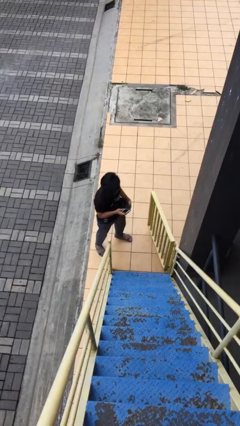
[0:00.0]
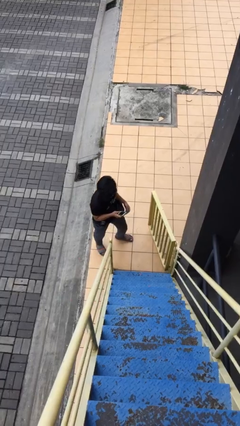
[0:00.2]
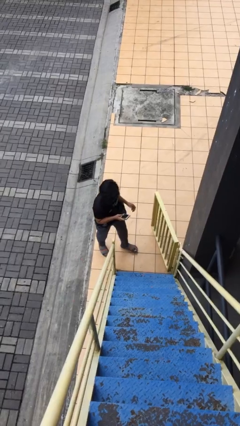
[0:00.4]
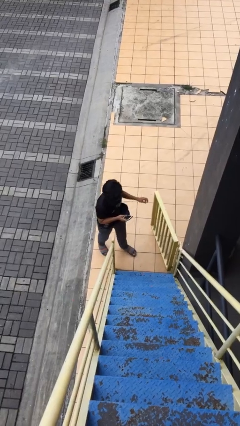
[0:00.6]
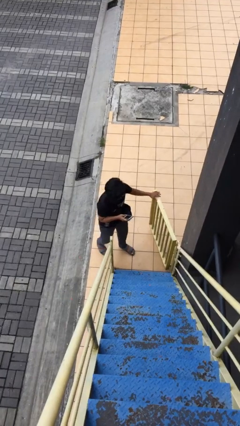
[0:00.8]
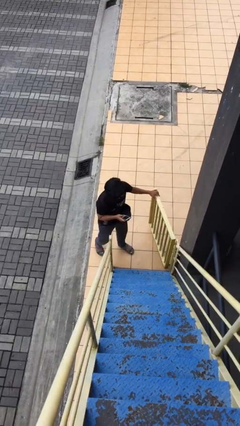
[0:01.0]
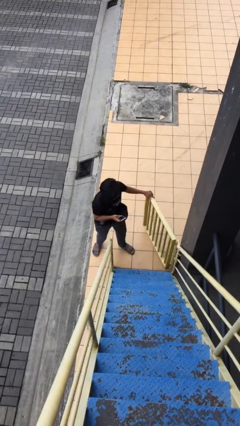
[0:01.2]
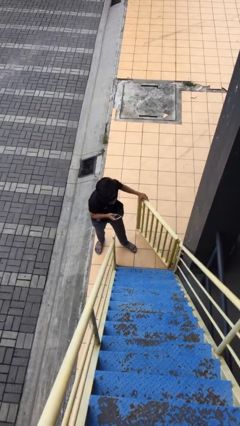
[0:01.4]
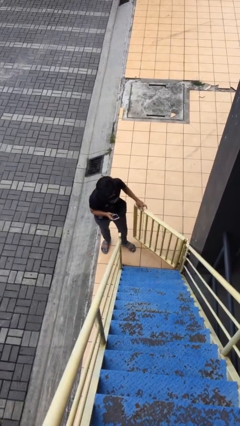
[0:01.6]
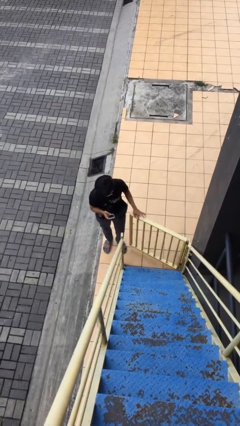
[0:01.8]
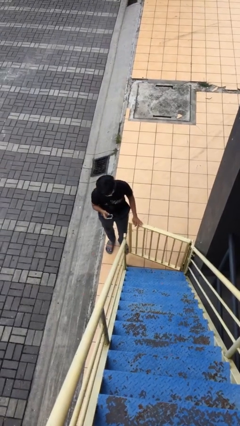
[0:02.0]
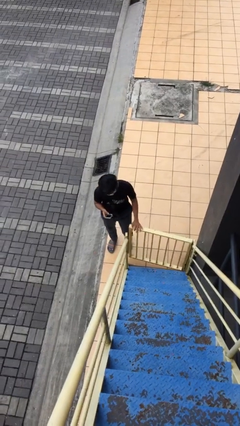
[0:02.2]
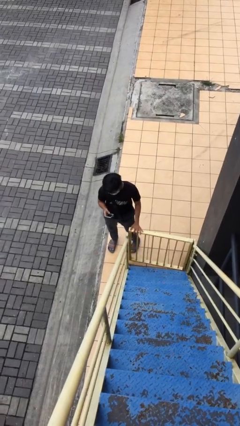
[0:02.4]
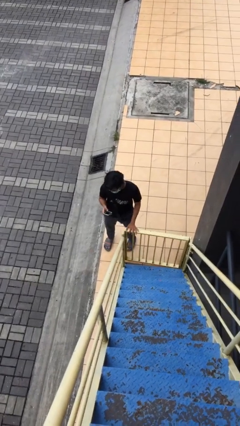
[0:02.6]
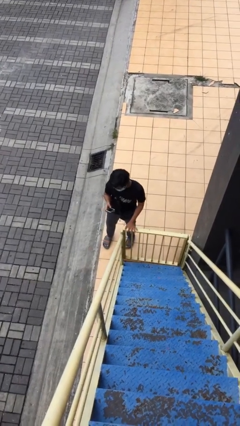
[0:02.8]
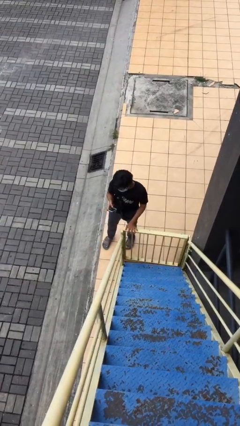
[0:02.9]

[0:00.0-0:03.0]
person closes facility door

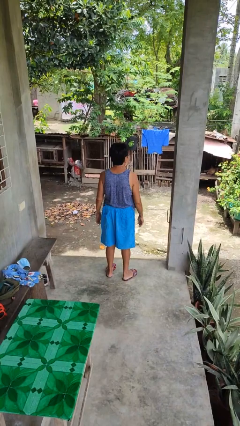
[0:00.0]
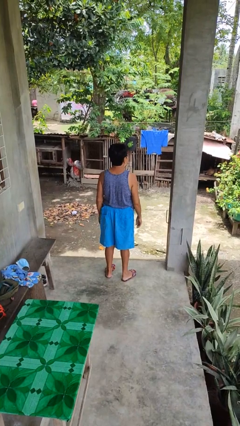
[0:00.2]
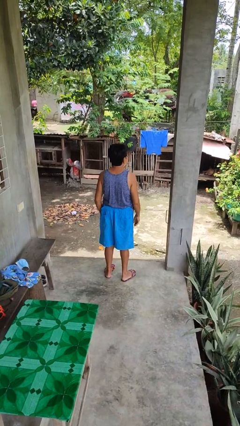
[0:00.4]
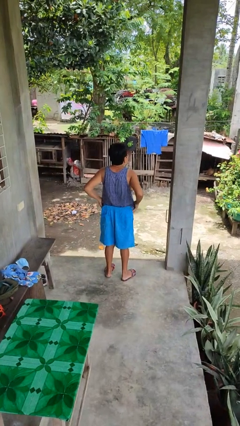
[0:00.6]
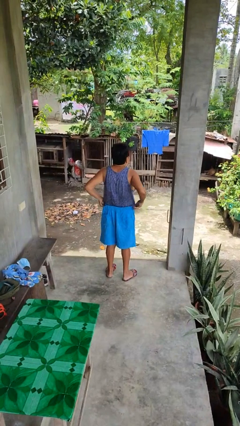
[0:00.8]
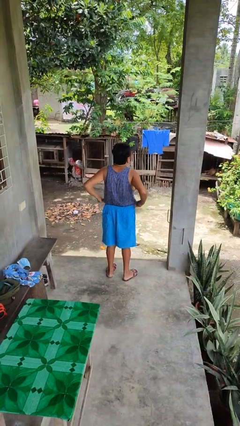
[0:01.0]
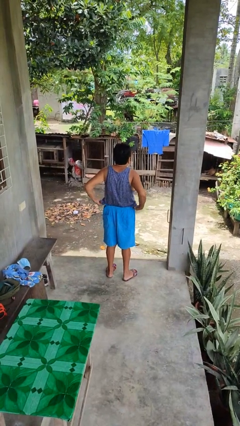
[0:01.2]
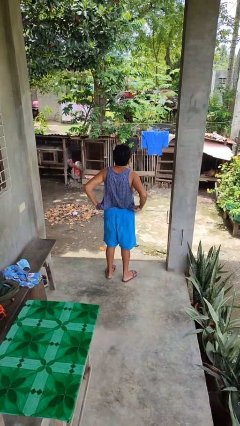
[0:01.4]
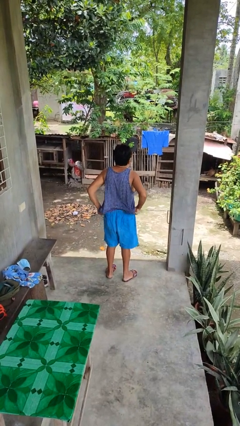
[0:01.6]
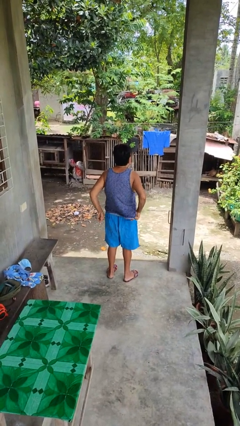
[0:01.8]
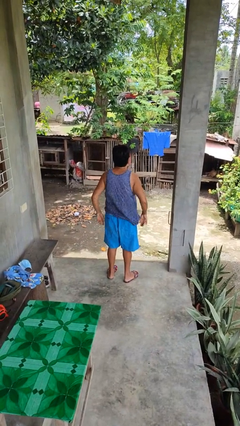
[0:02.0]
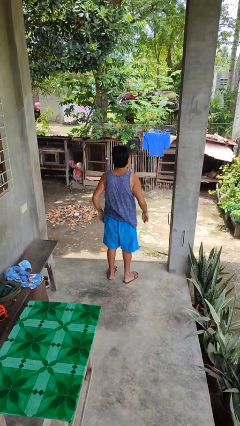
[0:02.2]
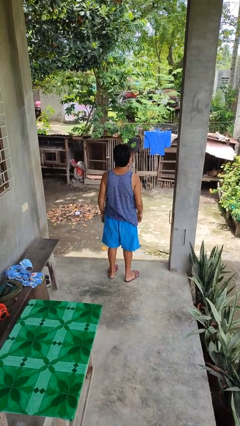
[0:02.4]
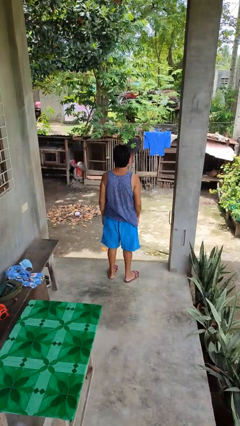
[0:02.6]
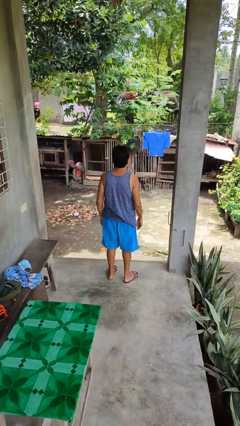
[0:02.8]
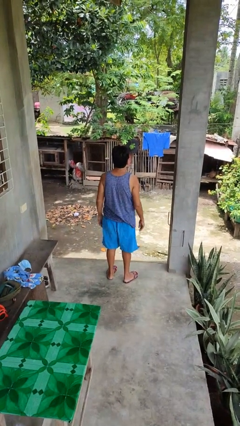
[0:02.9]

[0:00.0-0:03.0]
person untucks shirt

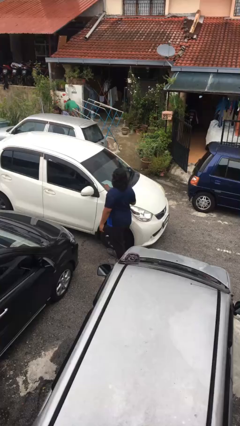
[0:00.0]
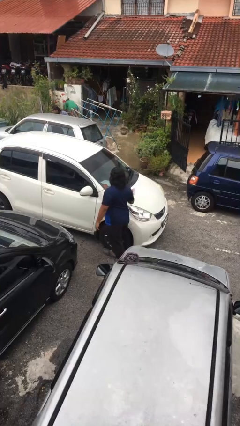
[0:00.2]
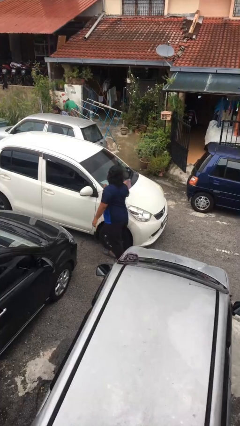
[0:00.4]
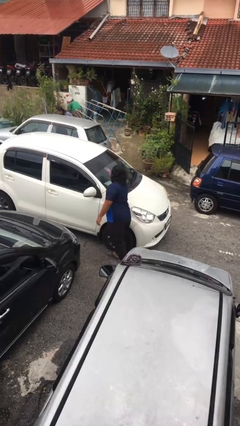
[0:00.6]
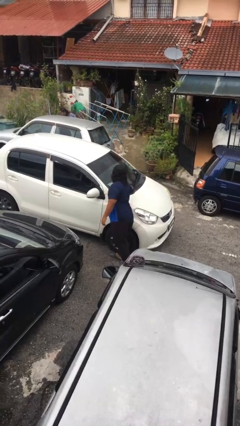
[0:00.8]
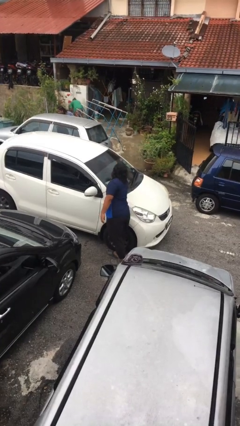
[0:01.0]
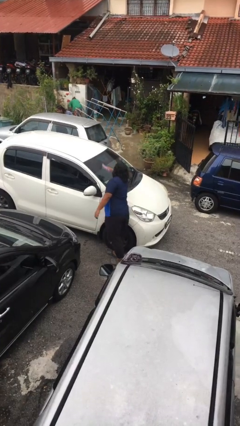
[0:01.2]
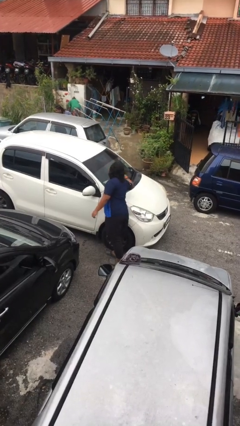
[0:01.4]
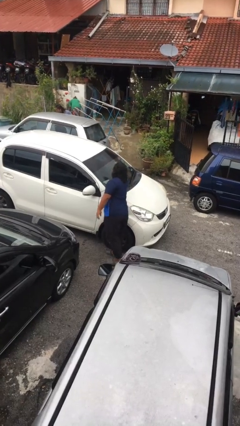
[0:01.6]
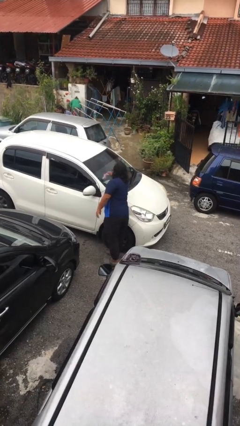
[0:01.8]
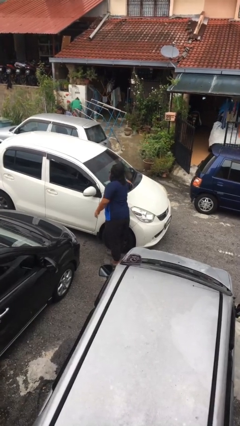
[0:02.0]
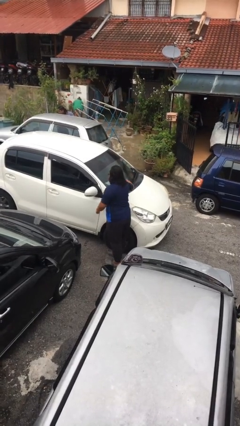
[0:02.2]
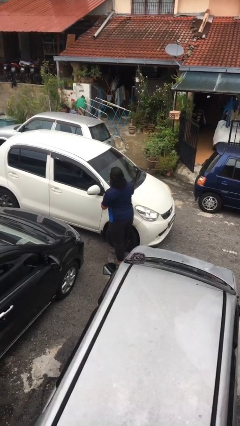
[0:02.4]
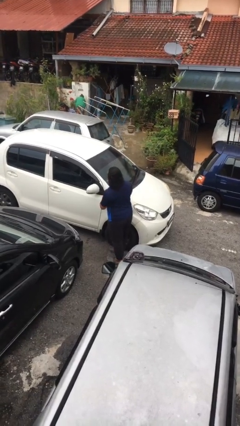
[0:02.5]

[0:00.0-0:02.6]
person polishes car with rag

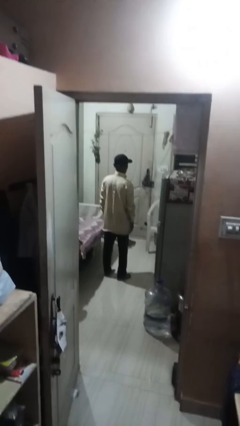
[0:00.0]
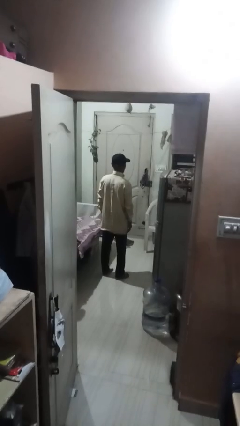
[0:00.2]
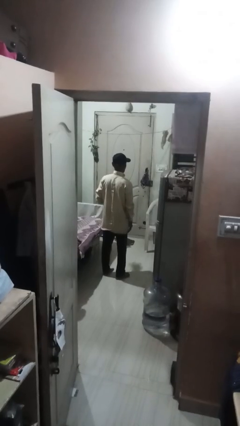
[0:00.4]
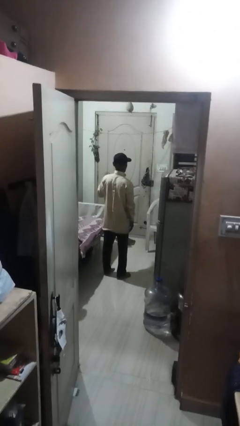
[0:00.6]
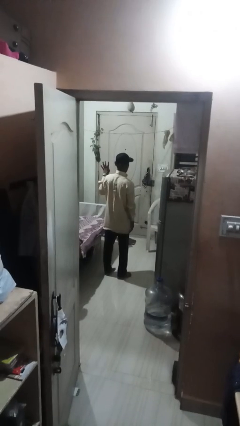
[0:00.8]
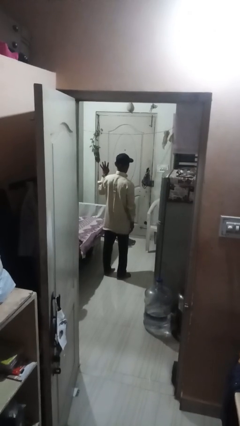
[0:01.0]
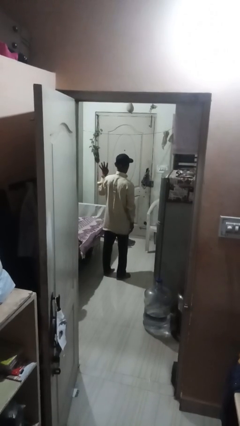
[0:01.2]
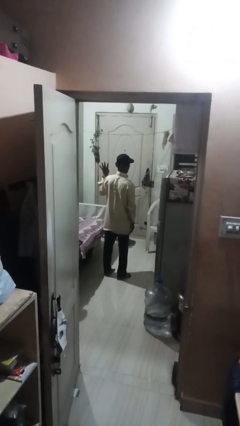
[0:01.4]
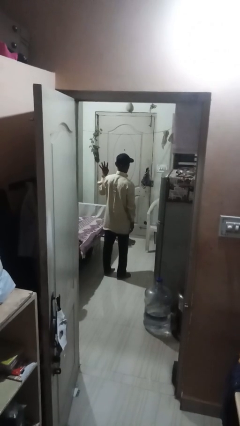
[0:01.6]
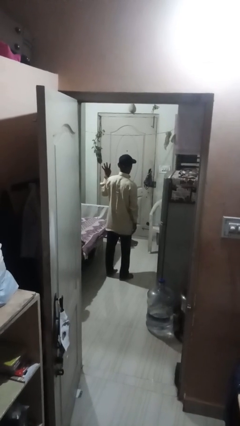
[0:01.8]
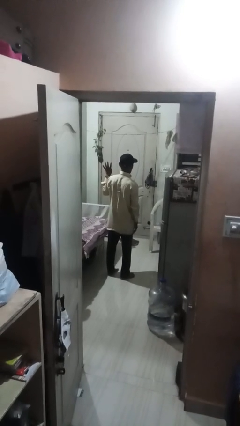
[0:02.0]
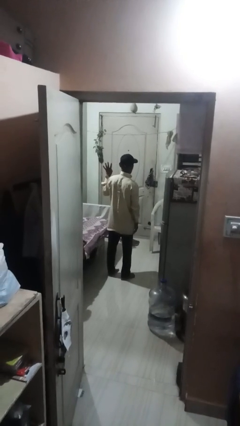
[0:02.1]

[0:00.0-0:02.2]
person gestures number four

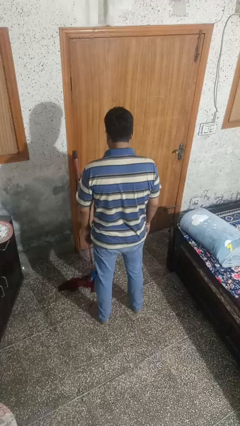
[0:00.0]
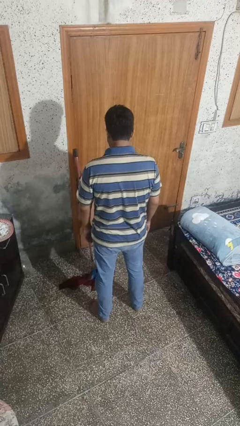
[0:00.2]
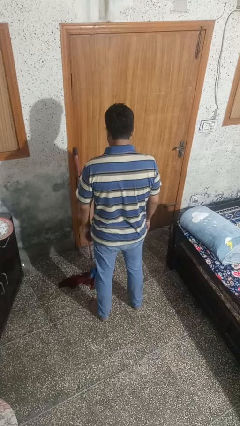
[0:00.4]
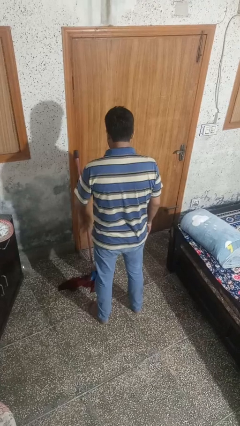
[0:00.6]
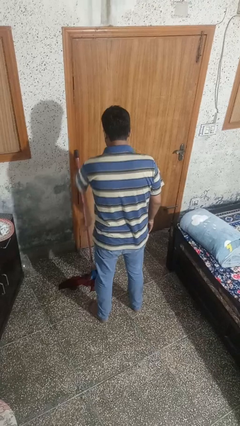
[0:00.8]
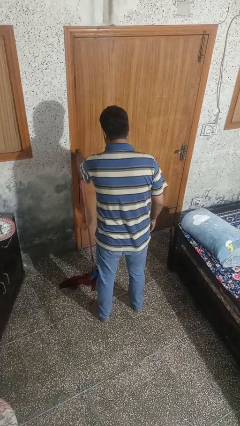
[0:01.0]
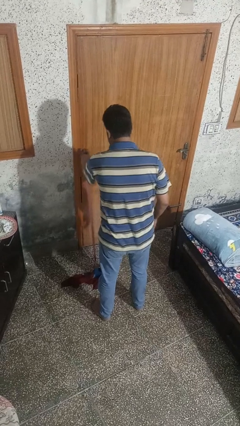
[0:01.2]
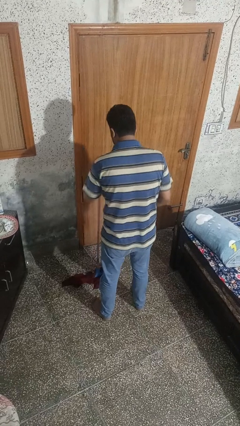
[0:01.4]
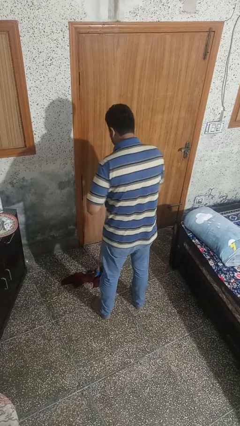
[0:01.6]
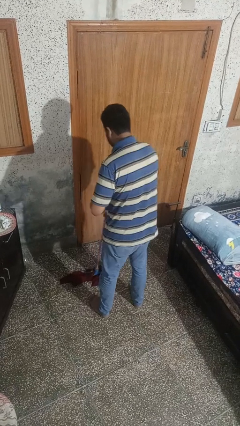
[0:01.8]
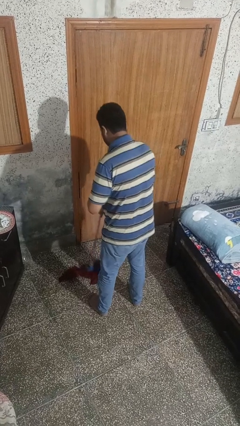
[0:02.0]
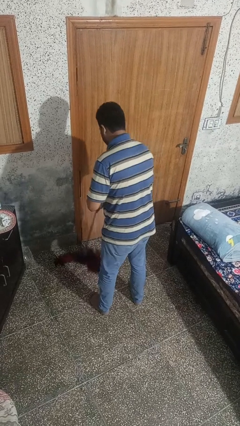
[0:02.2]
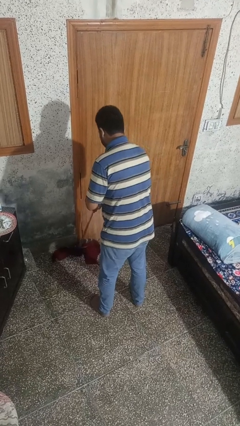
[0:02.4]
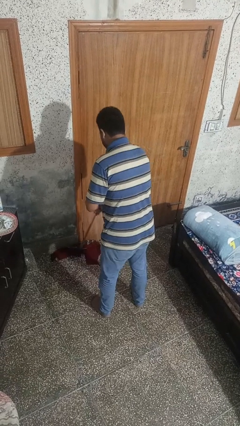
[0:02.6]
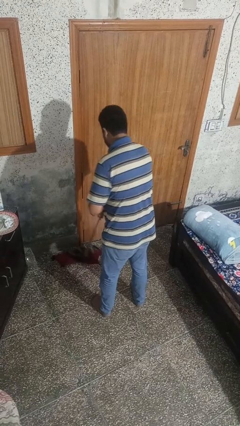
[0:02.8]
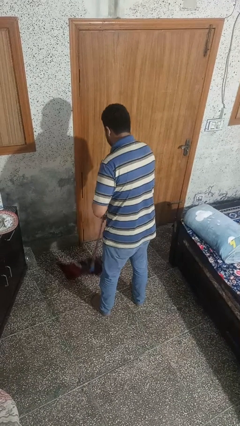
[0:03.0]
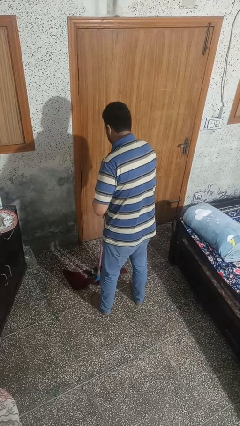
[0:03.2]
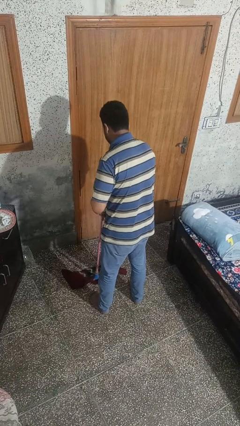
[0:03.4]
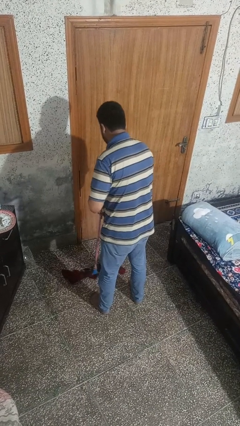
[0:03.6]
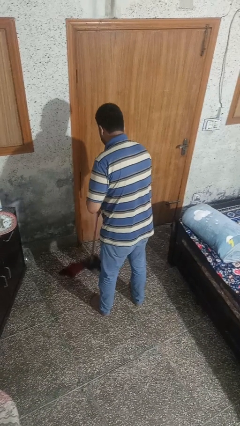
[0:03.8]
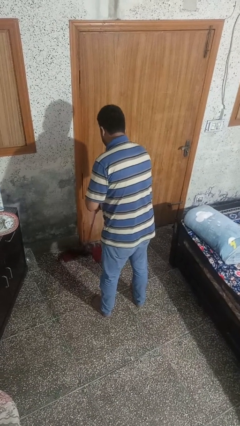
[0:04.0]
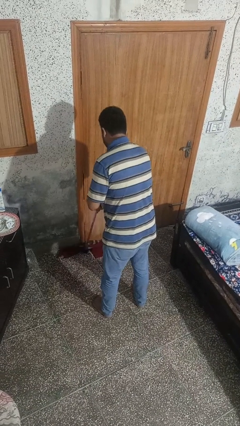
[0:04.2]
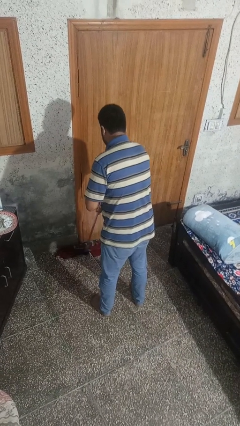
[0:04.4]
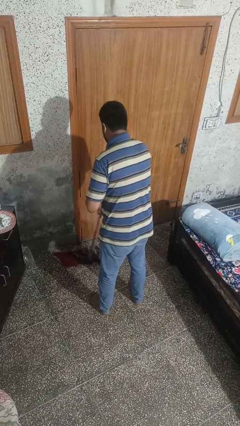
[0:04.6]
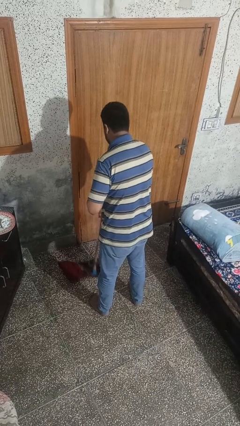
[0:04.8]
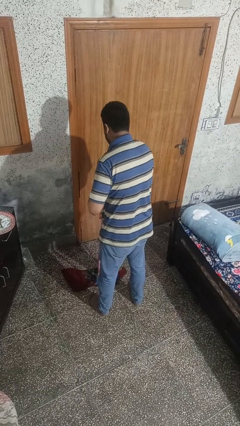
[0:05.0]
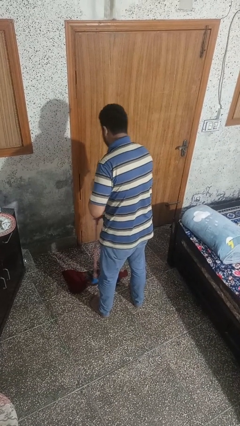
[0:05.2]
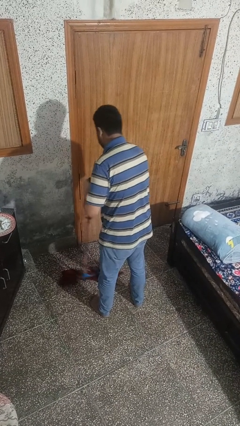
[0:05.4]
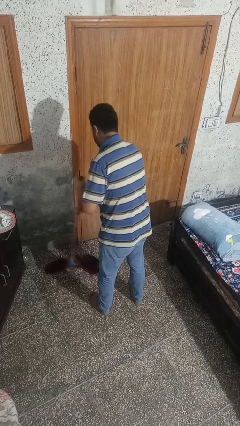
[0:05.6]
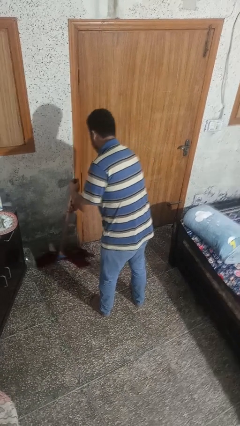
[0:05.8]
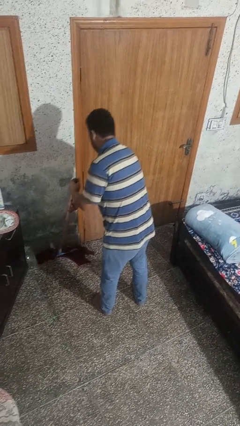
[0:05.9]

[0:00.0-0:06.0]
person mops

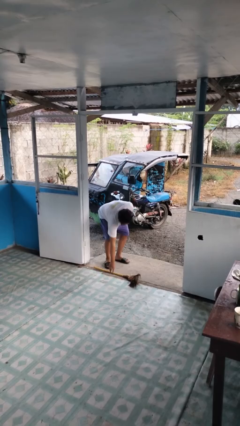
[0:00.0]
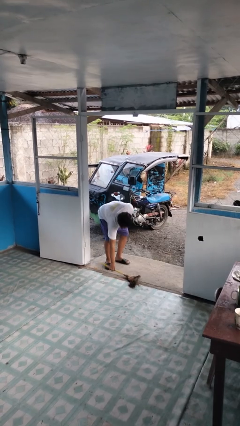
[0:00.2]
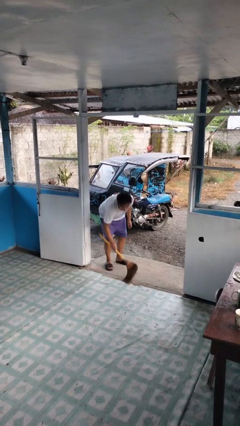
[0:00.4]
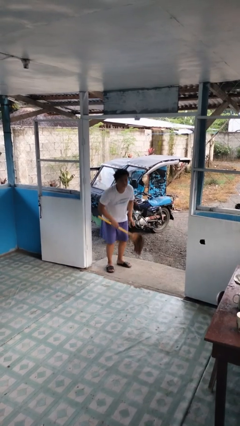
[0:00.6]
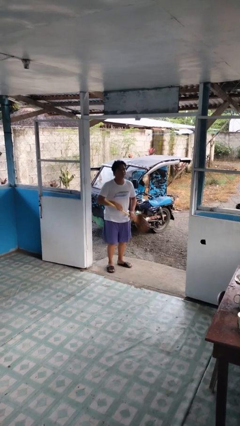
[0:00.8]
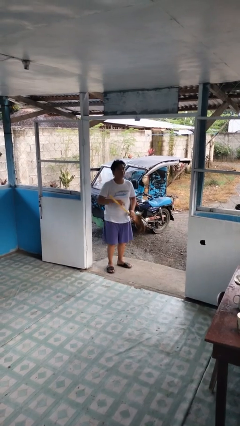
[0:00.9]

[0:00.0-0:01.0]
person picks up object from floor

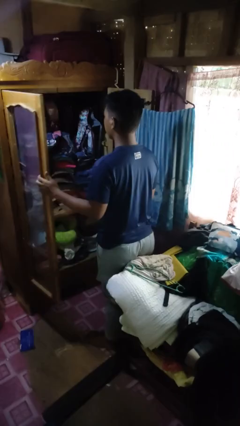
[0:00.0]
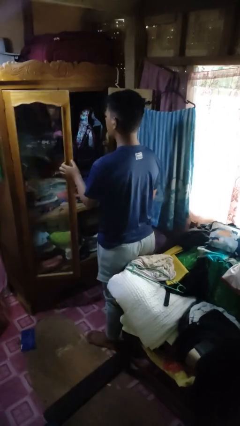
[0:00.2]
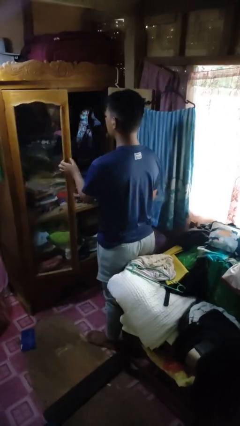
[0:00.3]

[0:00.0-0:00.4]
person closes closet door
